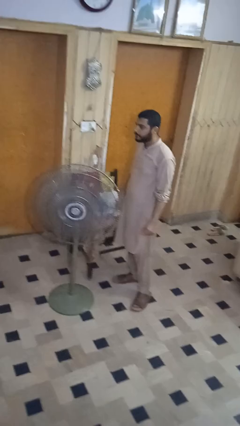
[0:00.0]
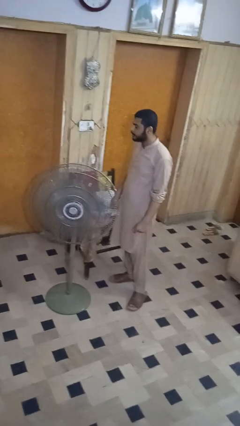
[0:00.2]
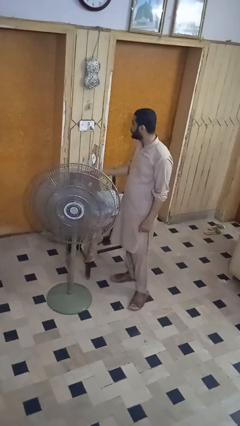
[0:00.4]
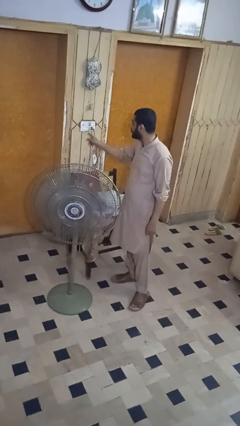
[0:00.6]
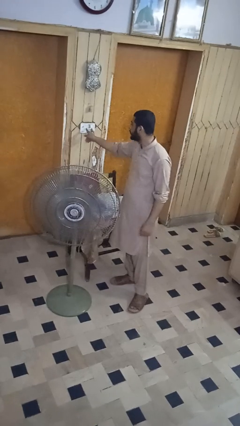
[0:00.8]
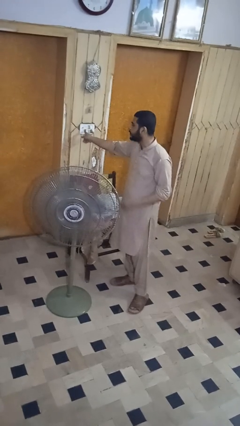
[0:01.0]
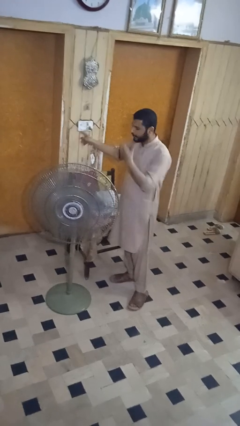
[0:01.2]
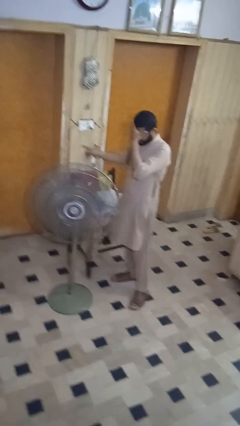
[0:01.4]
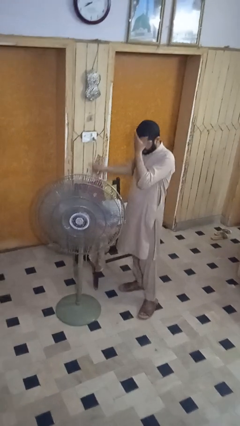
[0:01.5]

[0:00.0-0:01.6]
person turns off fan

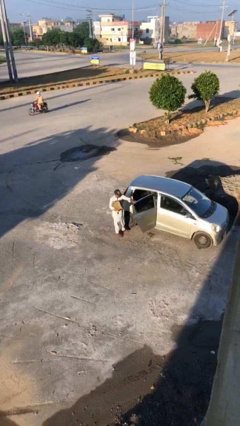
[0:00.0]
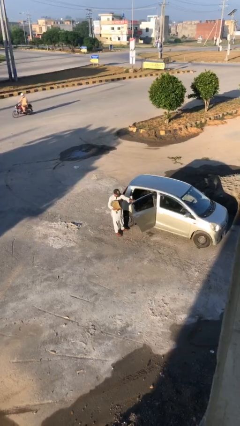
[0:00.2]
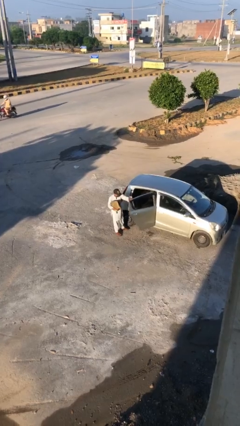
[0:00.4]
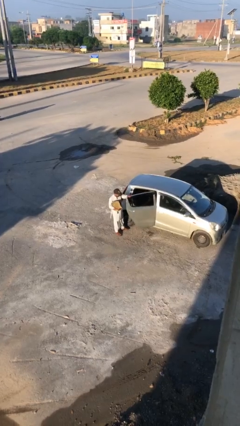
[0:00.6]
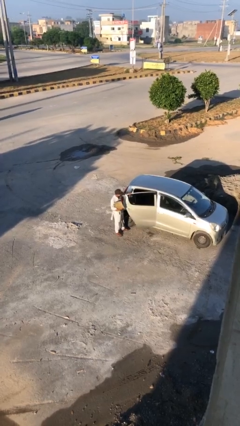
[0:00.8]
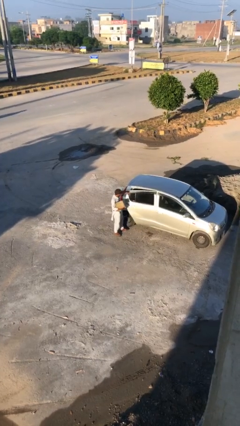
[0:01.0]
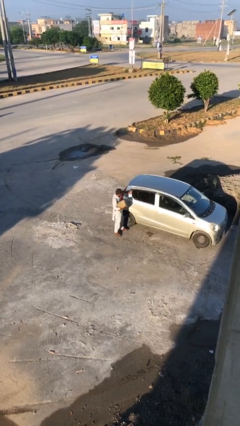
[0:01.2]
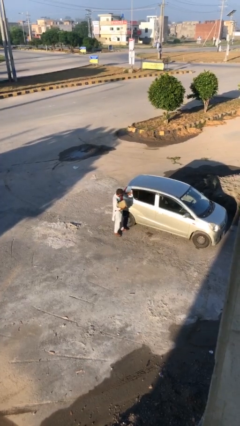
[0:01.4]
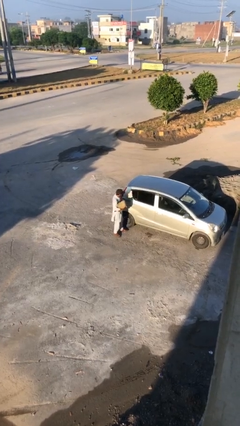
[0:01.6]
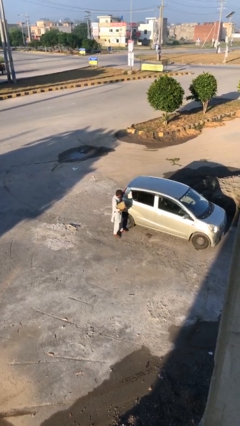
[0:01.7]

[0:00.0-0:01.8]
person closes car door

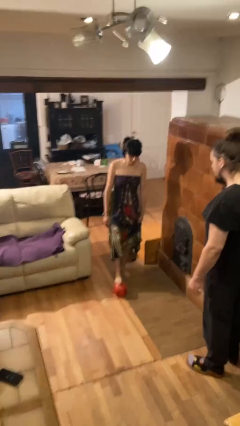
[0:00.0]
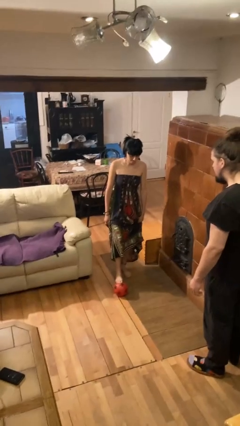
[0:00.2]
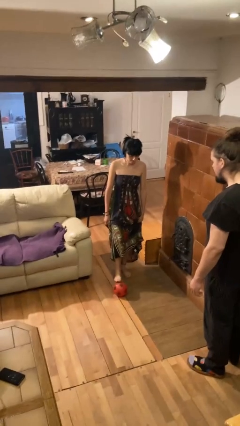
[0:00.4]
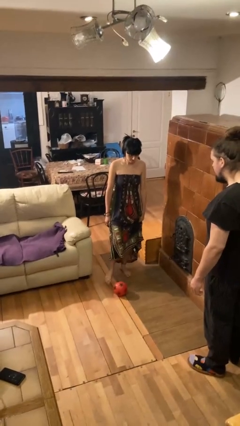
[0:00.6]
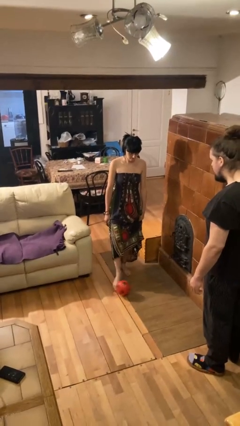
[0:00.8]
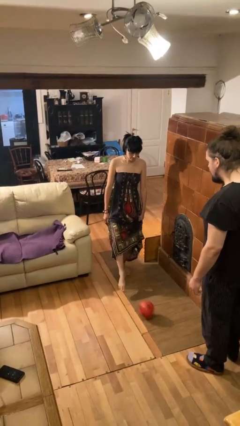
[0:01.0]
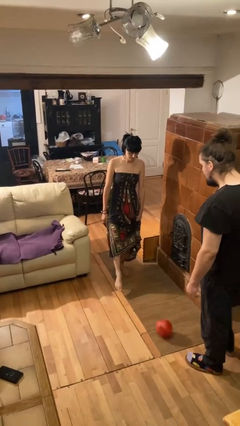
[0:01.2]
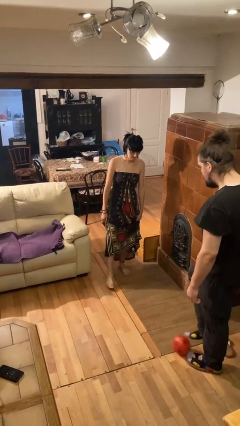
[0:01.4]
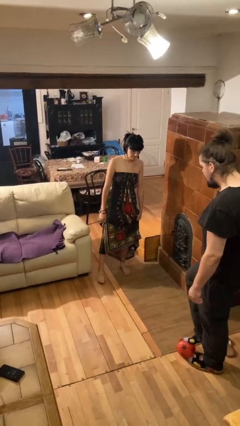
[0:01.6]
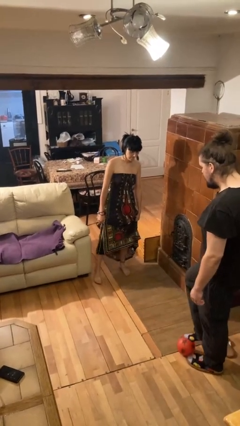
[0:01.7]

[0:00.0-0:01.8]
person kicks object to person

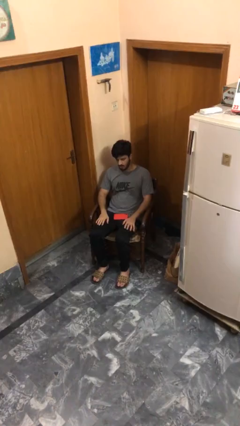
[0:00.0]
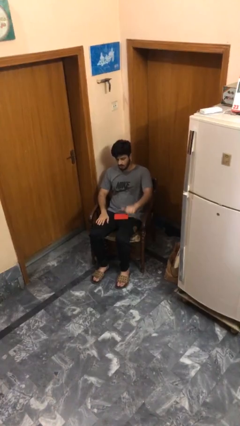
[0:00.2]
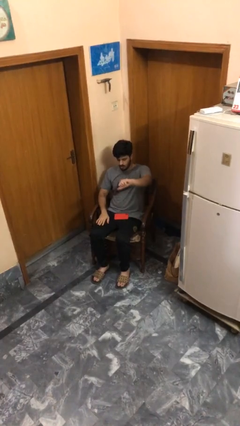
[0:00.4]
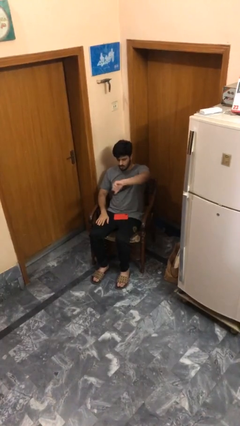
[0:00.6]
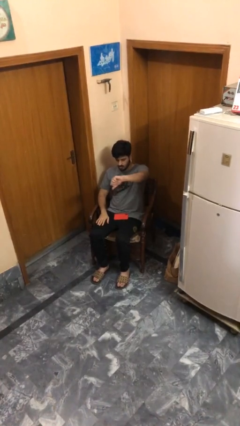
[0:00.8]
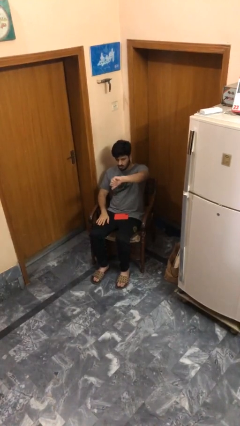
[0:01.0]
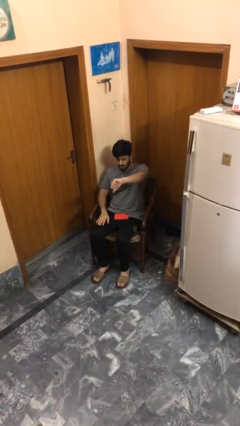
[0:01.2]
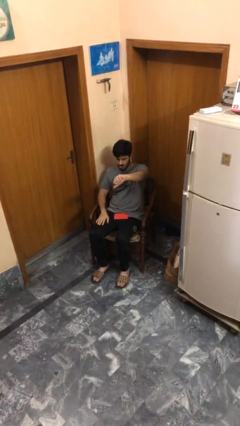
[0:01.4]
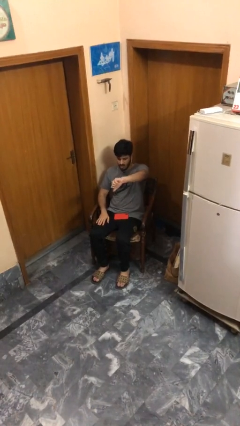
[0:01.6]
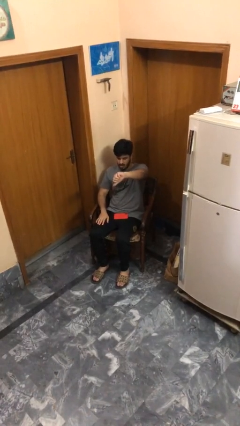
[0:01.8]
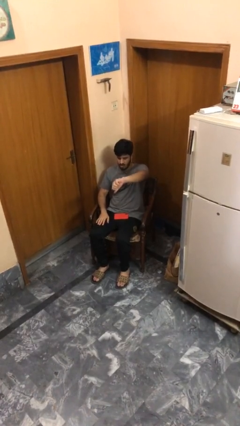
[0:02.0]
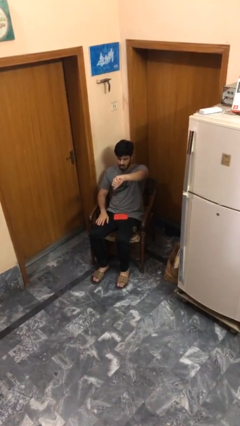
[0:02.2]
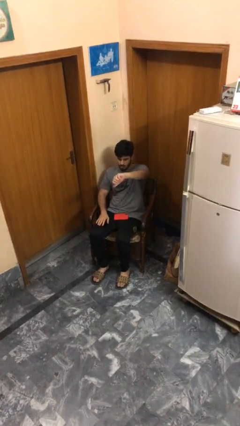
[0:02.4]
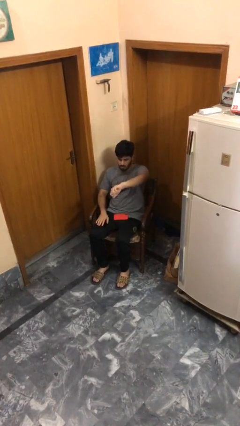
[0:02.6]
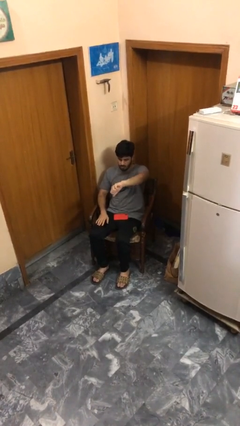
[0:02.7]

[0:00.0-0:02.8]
person gestures thumbs down

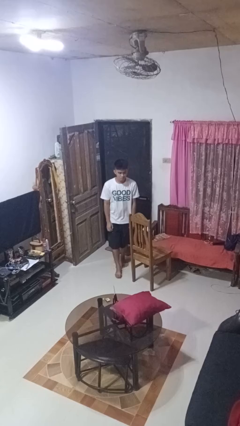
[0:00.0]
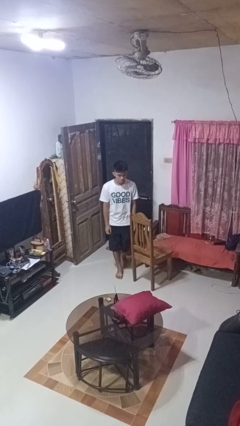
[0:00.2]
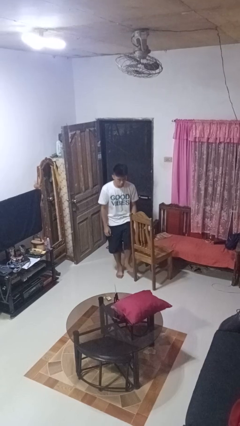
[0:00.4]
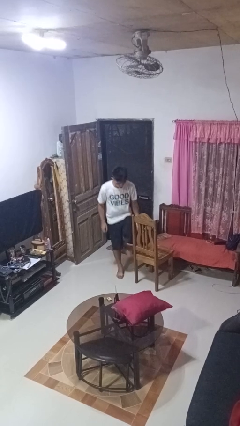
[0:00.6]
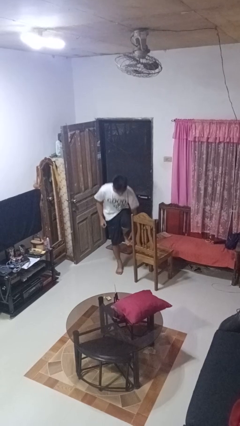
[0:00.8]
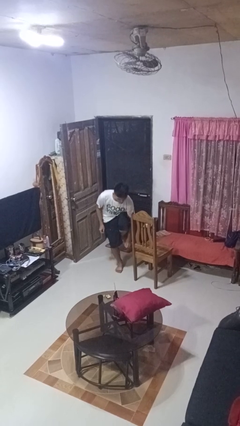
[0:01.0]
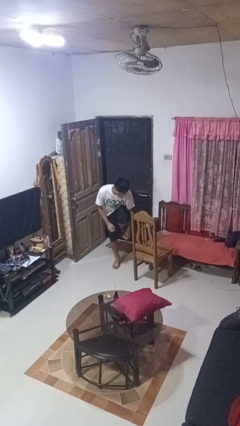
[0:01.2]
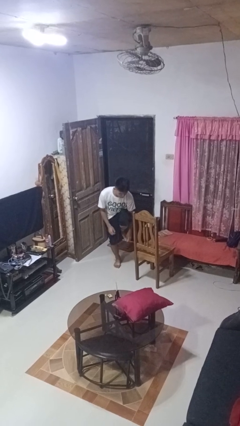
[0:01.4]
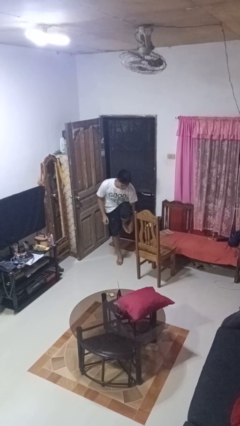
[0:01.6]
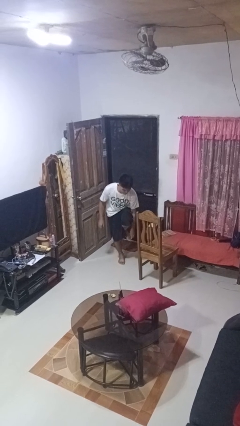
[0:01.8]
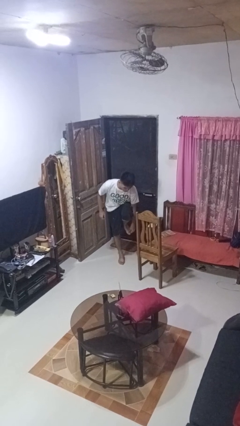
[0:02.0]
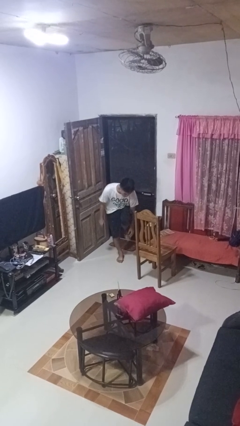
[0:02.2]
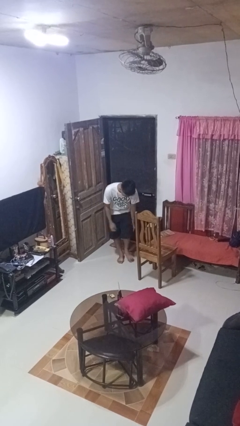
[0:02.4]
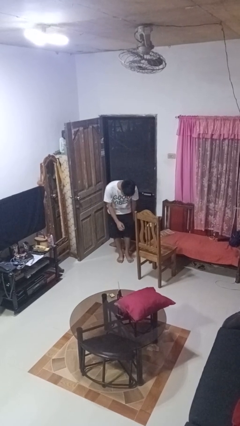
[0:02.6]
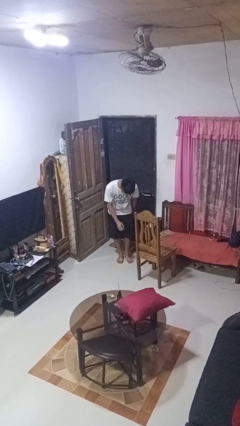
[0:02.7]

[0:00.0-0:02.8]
person stubs toe

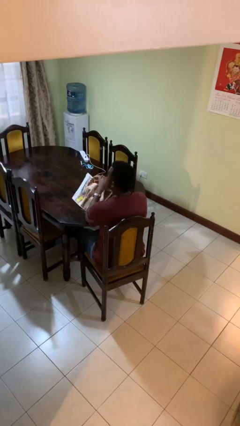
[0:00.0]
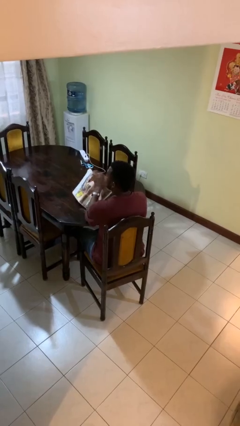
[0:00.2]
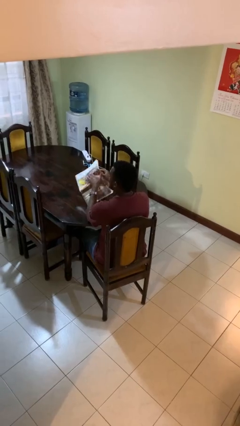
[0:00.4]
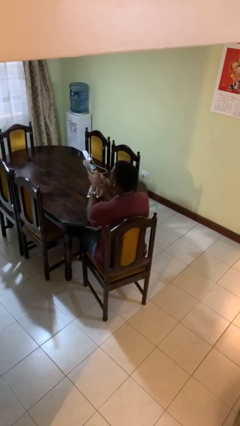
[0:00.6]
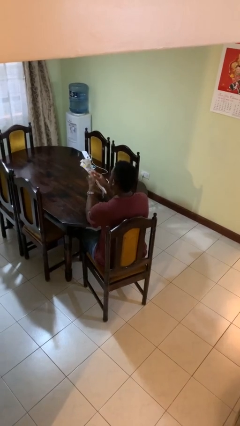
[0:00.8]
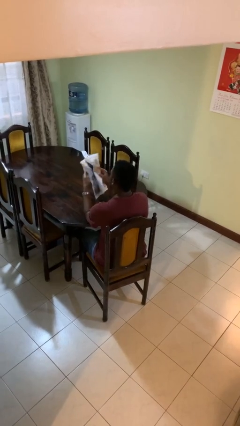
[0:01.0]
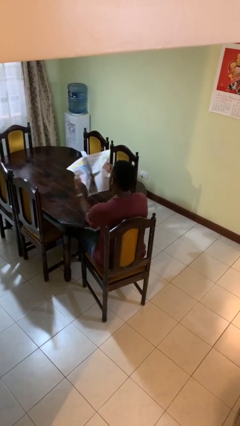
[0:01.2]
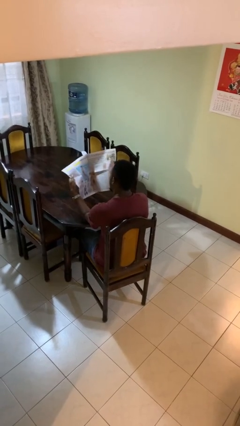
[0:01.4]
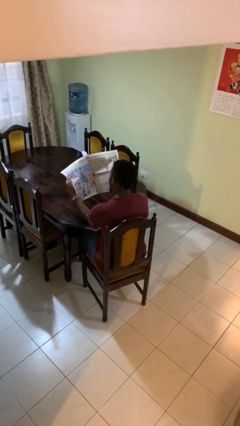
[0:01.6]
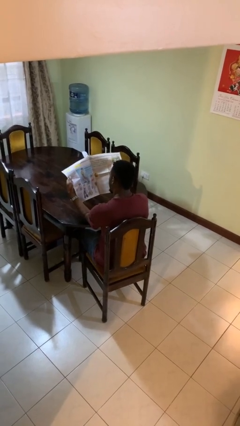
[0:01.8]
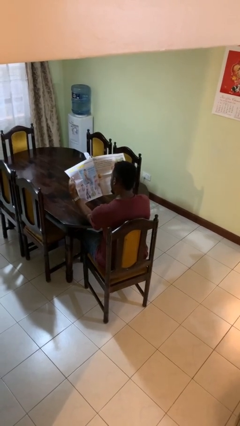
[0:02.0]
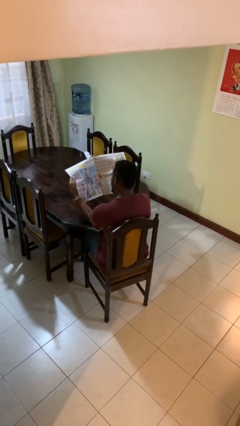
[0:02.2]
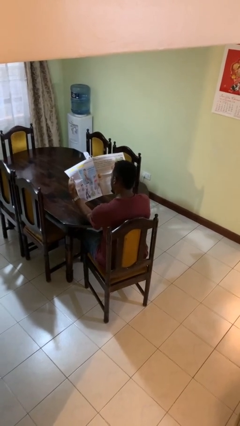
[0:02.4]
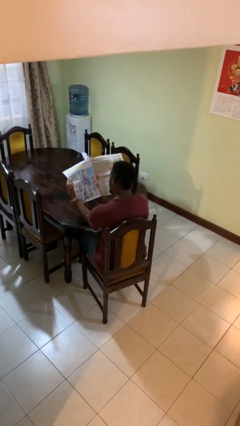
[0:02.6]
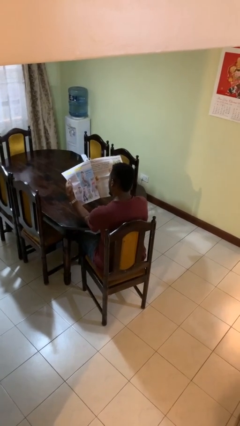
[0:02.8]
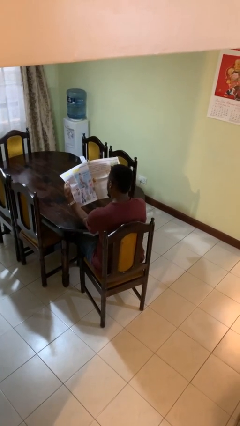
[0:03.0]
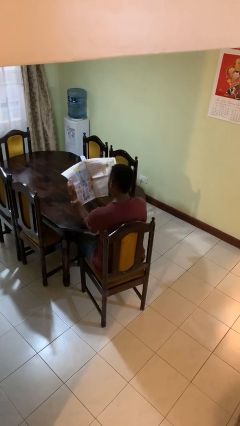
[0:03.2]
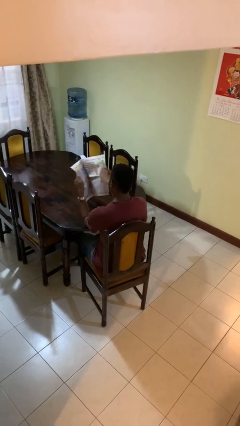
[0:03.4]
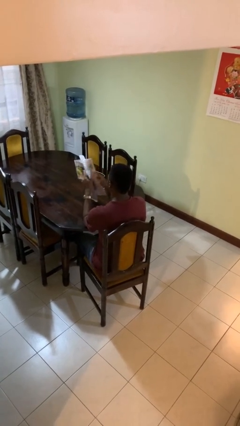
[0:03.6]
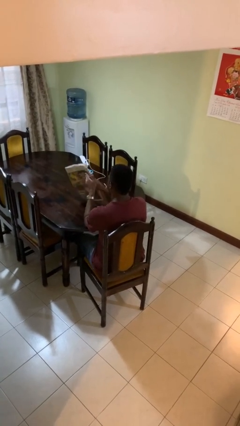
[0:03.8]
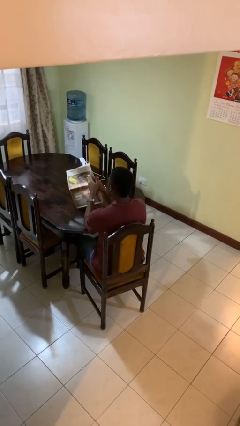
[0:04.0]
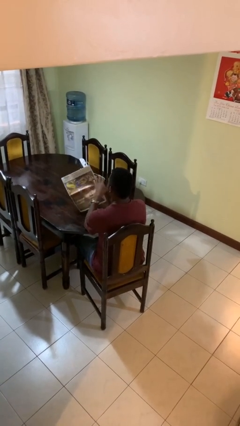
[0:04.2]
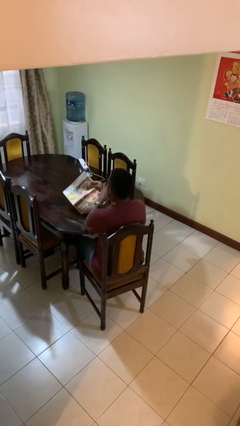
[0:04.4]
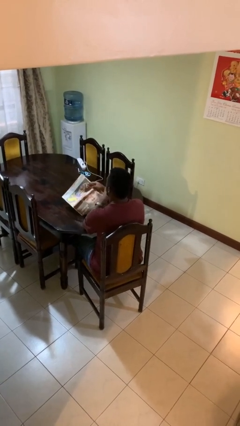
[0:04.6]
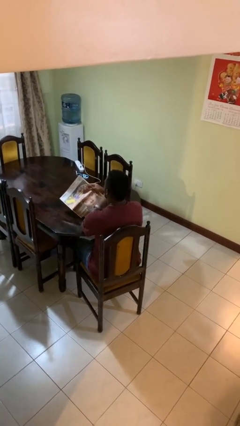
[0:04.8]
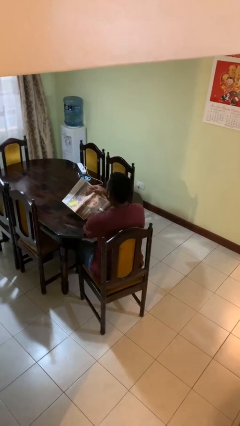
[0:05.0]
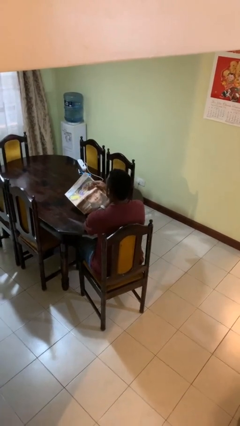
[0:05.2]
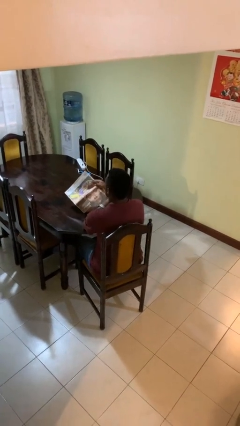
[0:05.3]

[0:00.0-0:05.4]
person reads newspaper

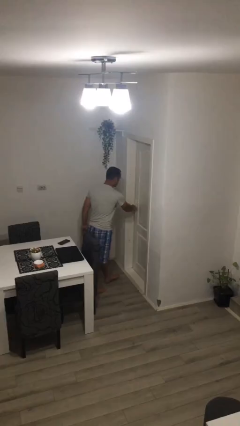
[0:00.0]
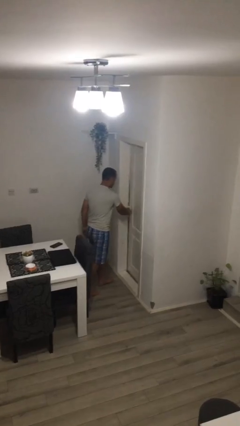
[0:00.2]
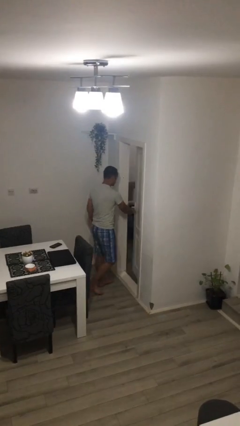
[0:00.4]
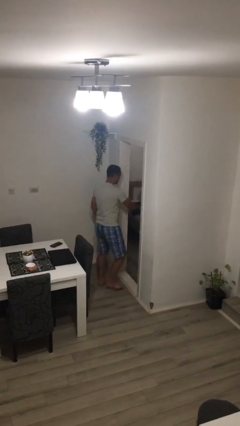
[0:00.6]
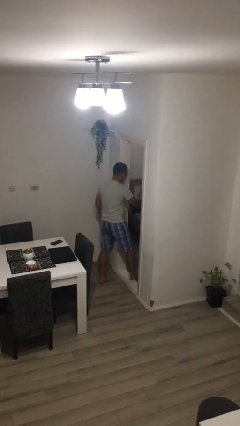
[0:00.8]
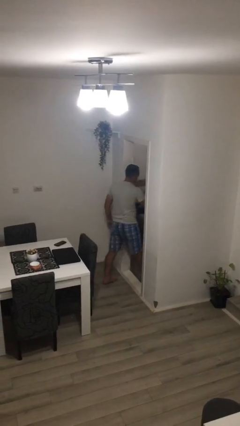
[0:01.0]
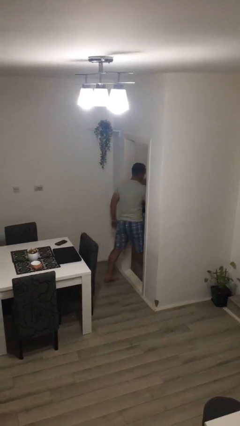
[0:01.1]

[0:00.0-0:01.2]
person opens facility door
